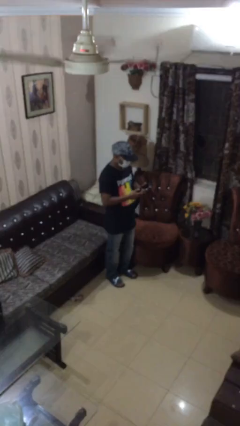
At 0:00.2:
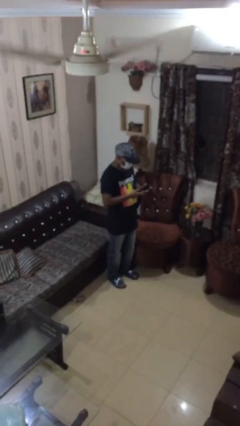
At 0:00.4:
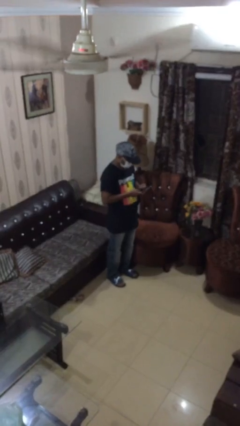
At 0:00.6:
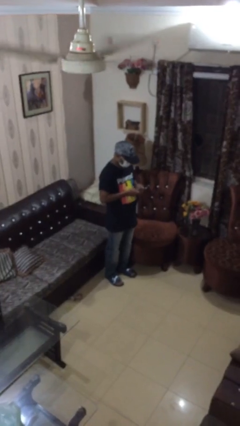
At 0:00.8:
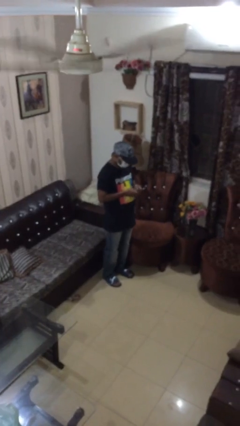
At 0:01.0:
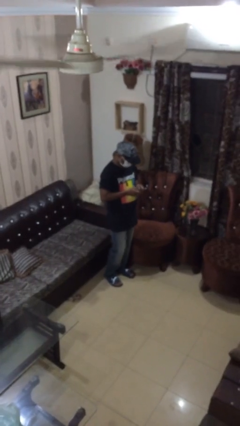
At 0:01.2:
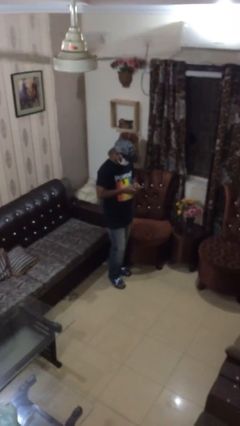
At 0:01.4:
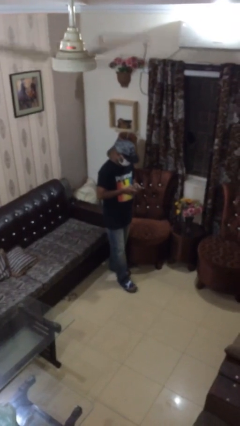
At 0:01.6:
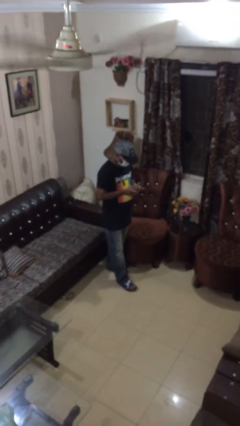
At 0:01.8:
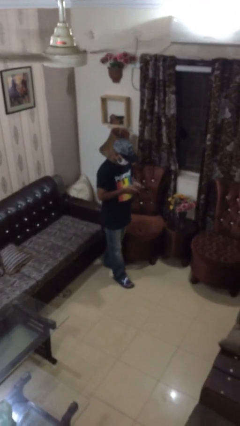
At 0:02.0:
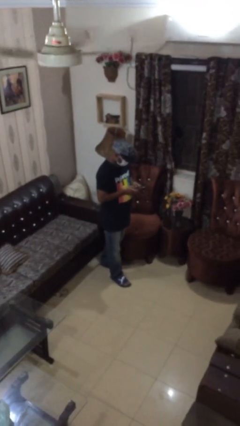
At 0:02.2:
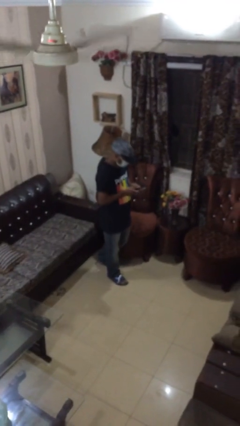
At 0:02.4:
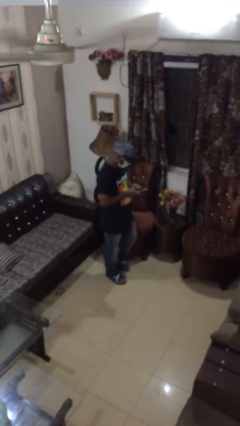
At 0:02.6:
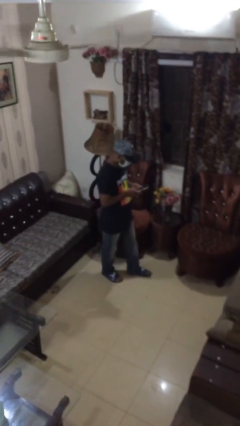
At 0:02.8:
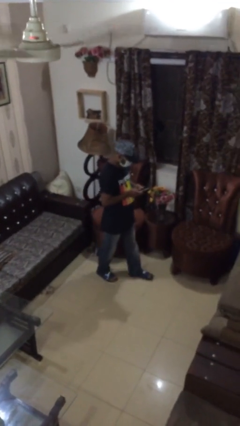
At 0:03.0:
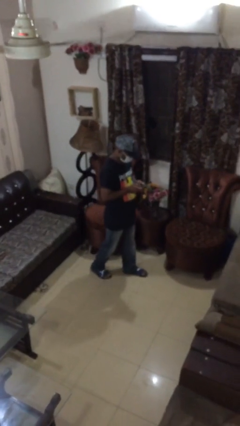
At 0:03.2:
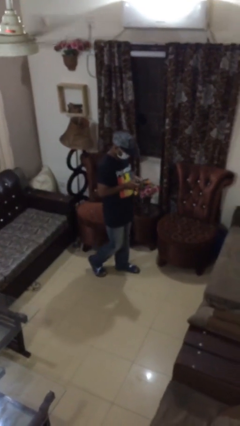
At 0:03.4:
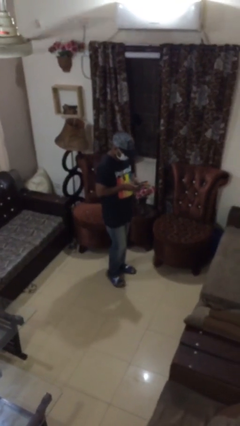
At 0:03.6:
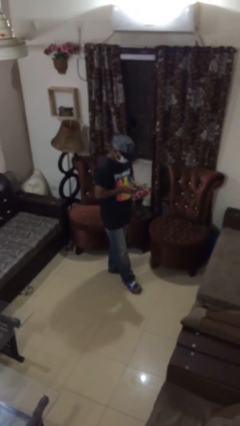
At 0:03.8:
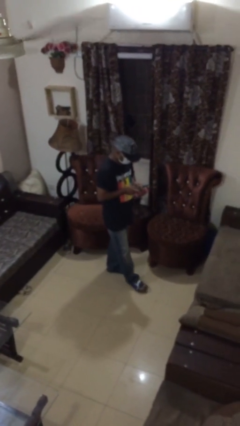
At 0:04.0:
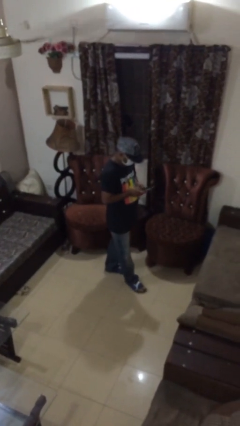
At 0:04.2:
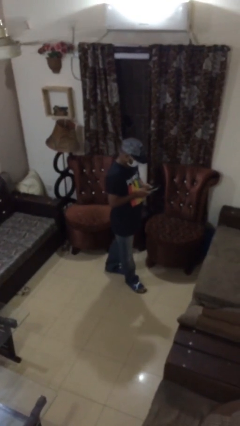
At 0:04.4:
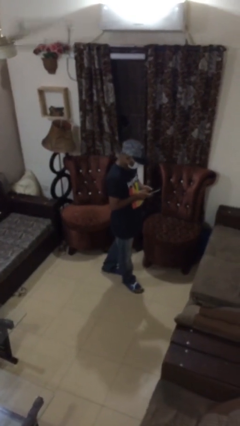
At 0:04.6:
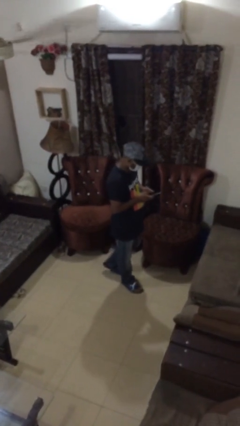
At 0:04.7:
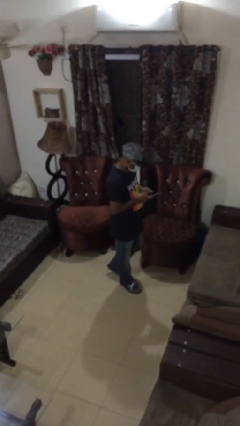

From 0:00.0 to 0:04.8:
person texts on phone

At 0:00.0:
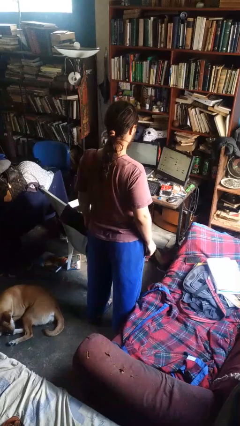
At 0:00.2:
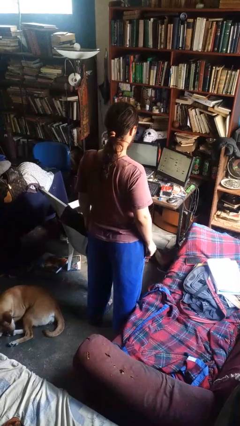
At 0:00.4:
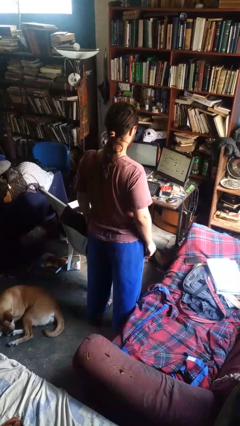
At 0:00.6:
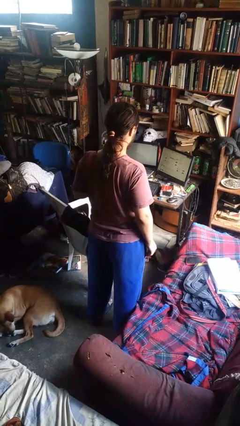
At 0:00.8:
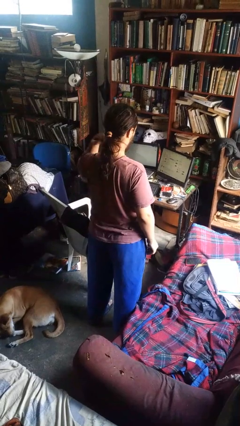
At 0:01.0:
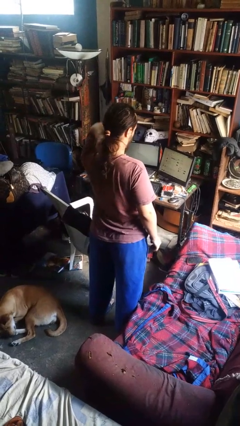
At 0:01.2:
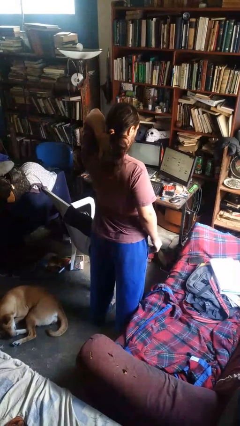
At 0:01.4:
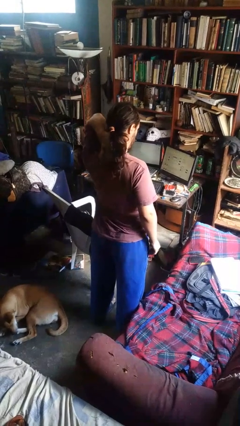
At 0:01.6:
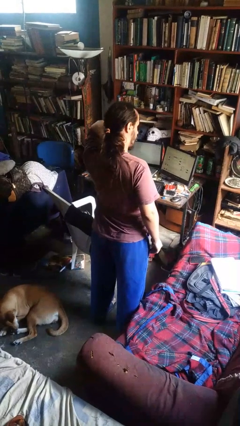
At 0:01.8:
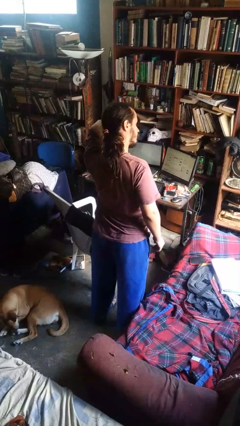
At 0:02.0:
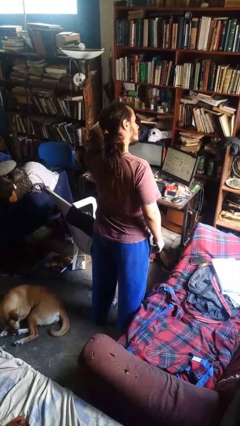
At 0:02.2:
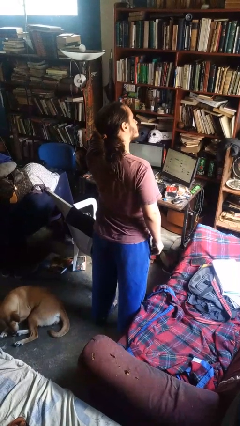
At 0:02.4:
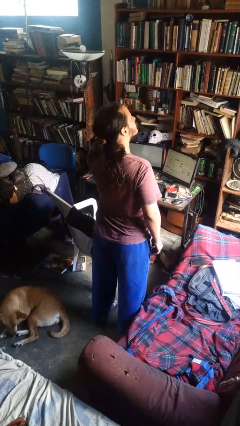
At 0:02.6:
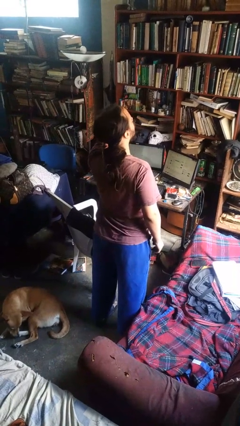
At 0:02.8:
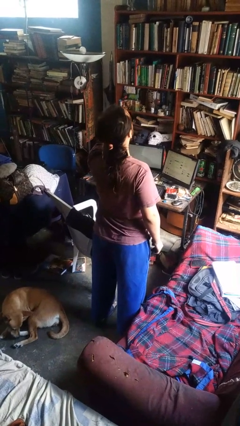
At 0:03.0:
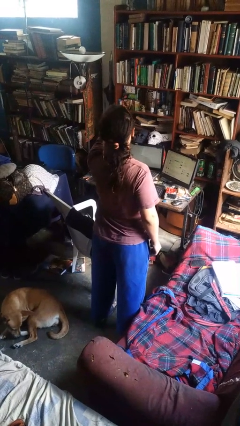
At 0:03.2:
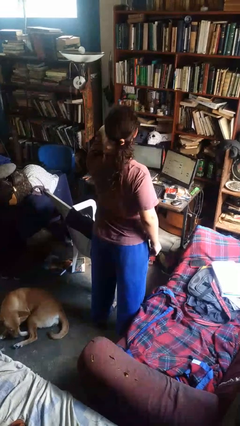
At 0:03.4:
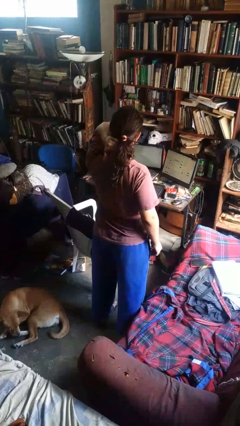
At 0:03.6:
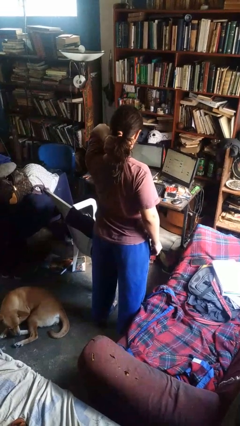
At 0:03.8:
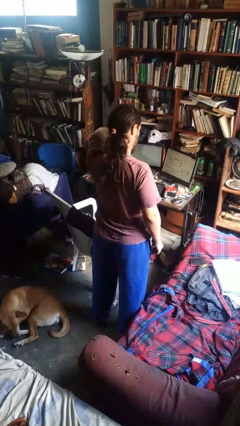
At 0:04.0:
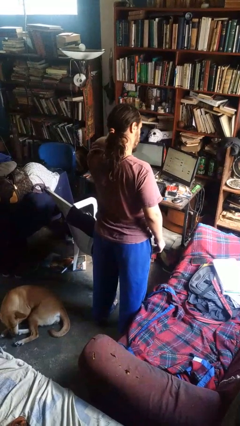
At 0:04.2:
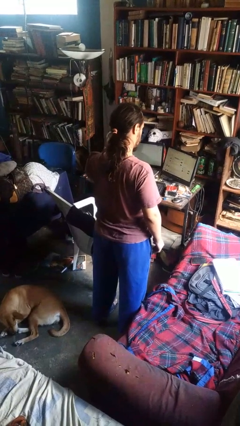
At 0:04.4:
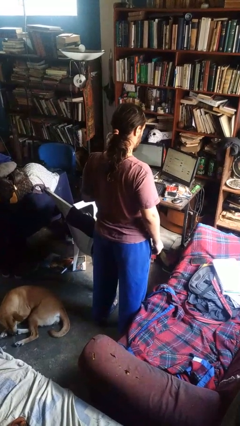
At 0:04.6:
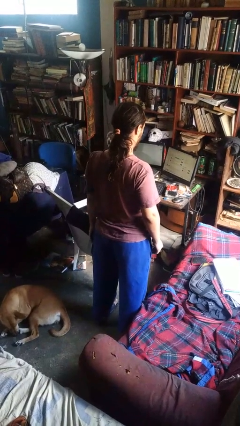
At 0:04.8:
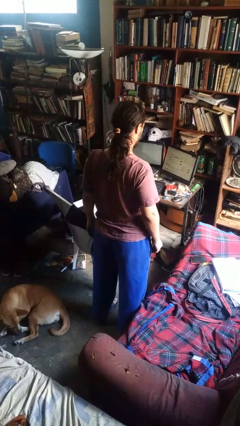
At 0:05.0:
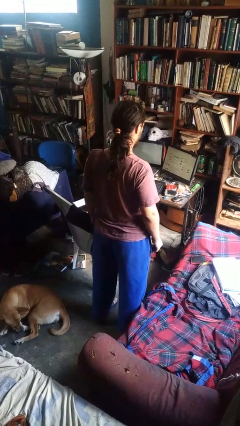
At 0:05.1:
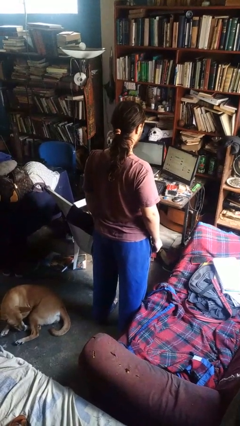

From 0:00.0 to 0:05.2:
person rubs neck

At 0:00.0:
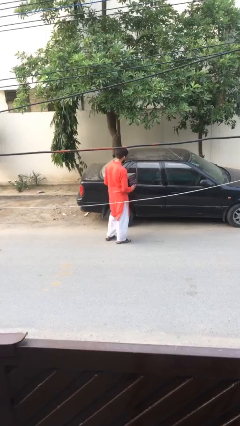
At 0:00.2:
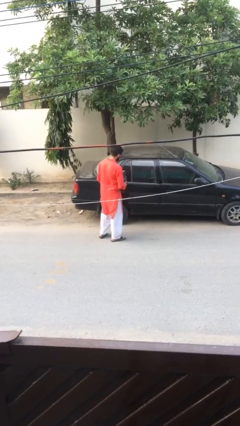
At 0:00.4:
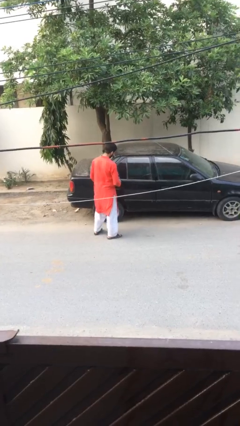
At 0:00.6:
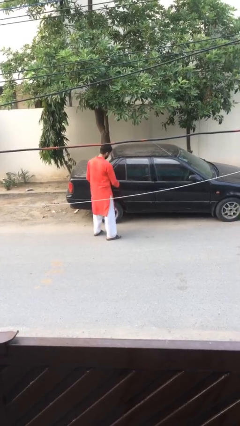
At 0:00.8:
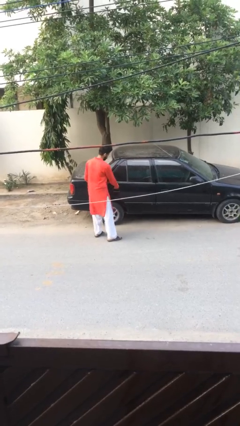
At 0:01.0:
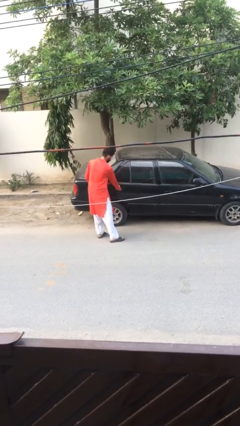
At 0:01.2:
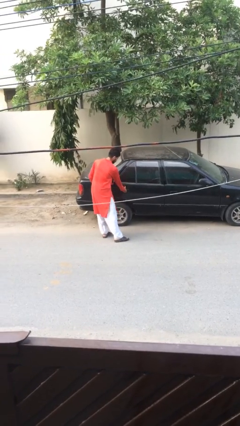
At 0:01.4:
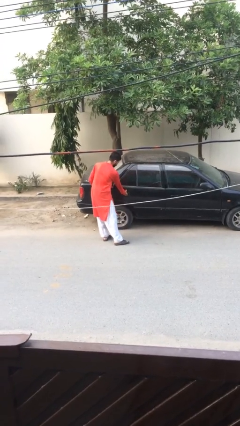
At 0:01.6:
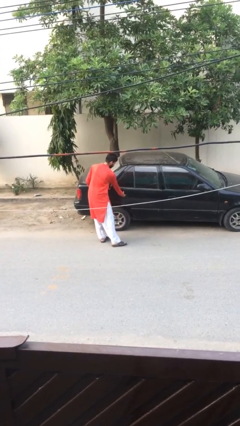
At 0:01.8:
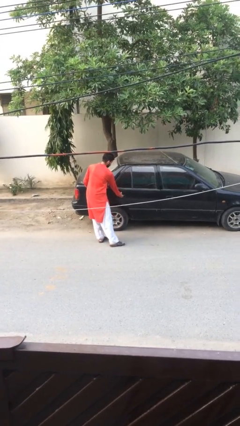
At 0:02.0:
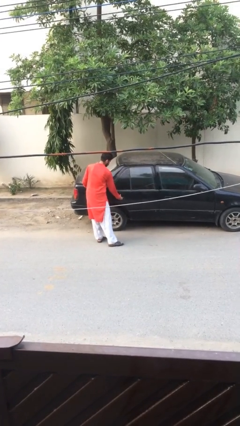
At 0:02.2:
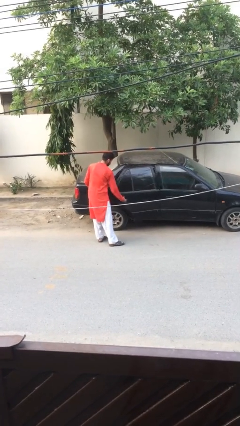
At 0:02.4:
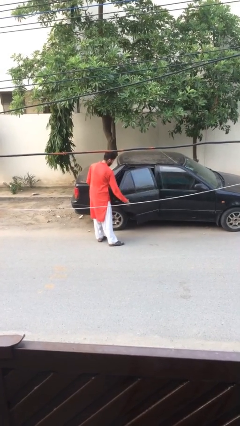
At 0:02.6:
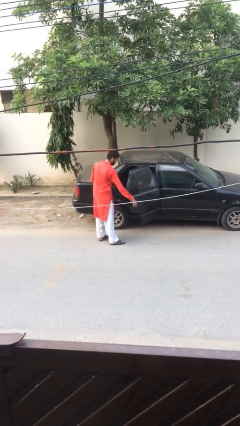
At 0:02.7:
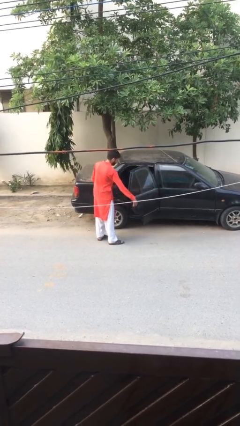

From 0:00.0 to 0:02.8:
person opens car door

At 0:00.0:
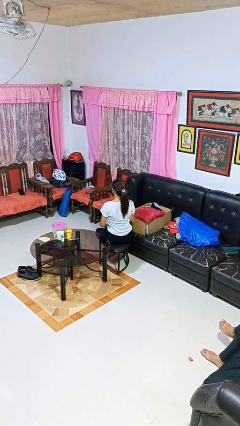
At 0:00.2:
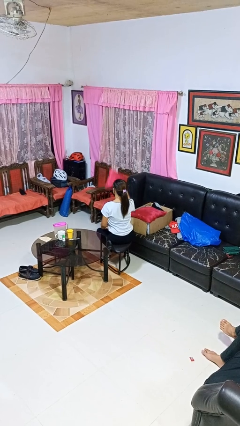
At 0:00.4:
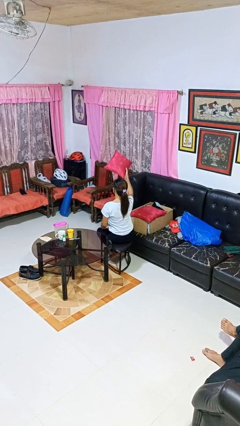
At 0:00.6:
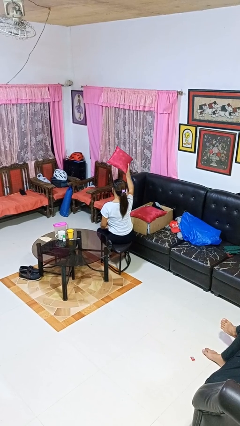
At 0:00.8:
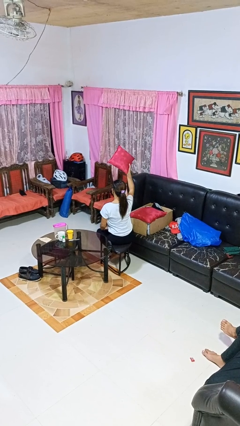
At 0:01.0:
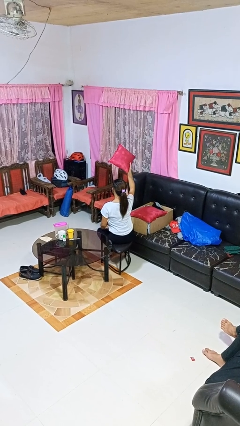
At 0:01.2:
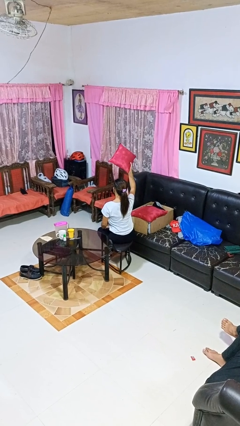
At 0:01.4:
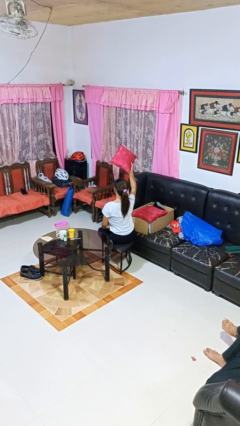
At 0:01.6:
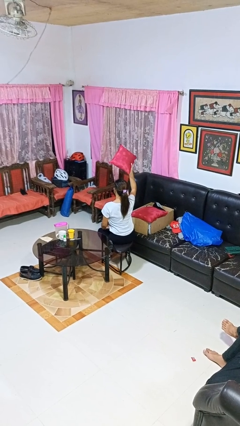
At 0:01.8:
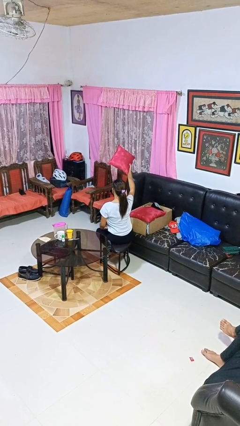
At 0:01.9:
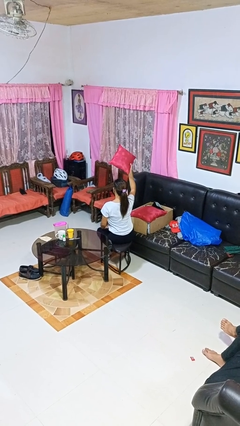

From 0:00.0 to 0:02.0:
person holds object above head

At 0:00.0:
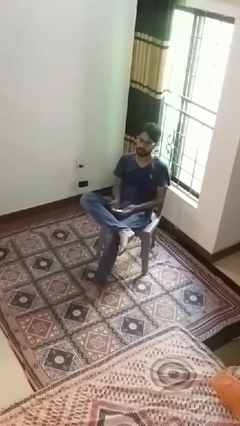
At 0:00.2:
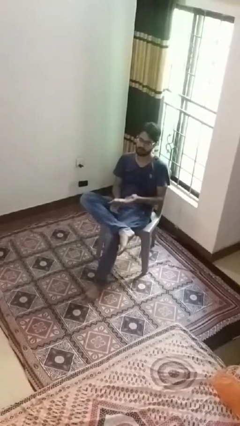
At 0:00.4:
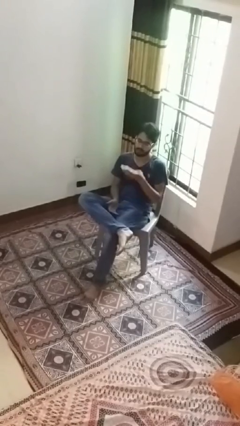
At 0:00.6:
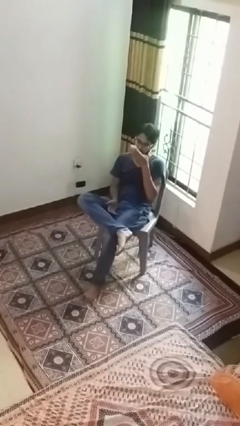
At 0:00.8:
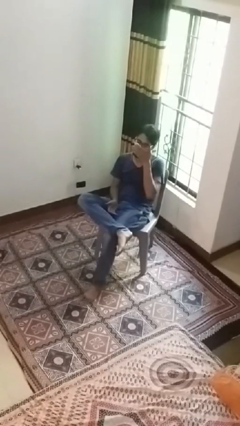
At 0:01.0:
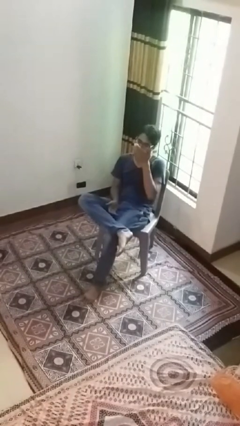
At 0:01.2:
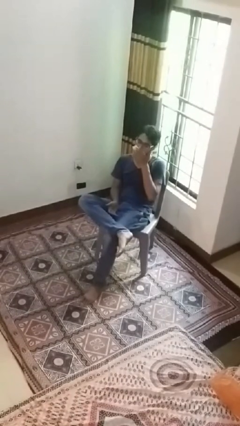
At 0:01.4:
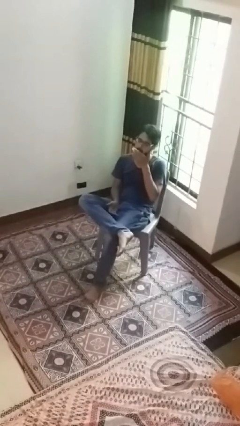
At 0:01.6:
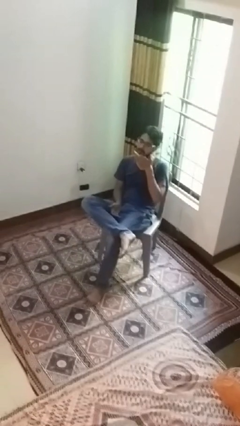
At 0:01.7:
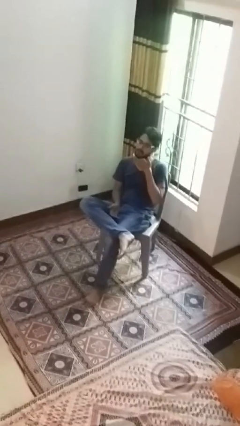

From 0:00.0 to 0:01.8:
person wipes mouth with napkin

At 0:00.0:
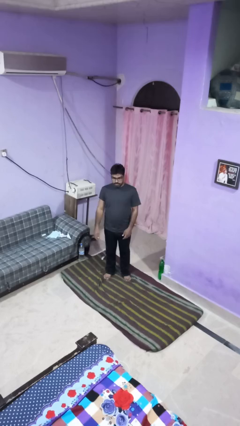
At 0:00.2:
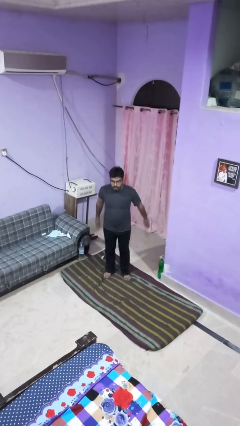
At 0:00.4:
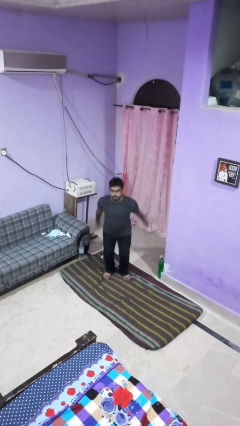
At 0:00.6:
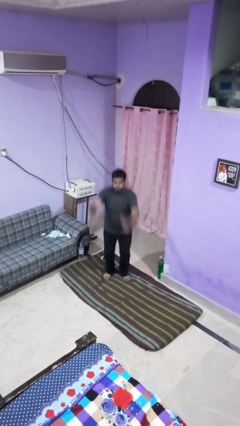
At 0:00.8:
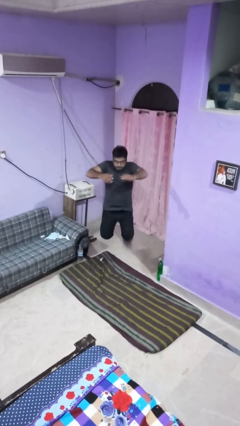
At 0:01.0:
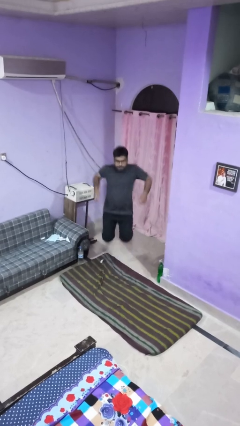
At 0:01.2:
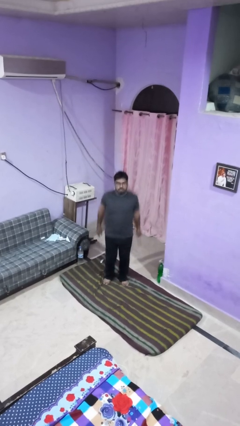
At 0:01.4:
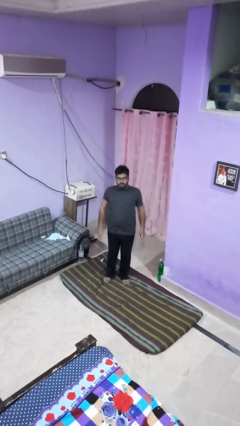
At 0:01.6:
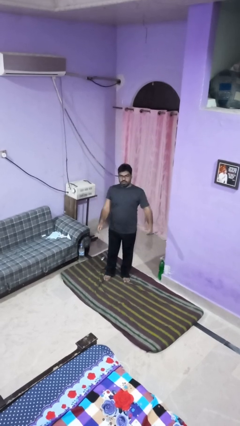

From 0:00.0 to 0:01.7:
person jumps
